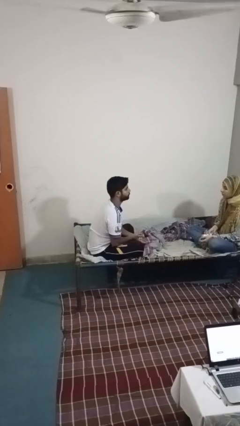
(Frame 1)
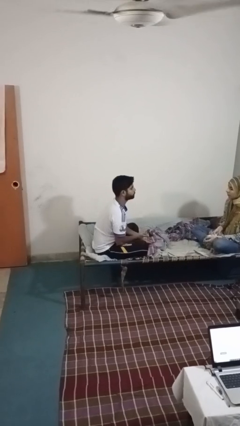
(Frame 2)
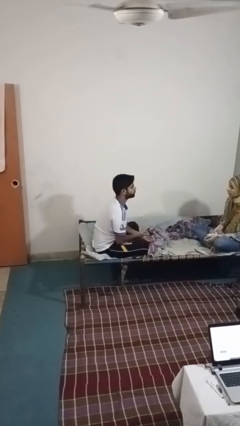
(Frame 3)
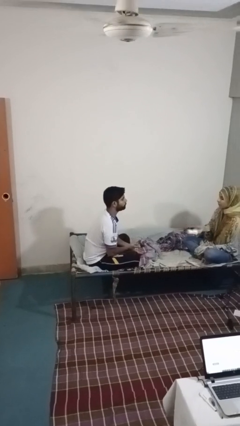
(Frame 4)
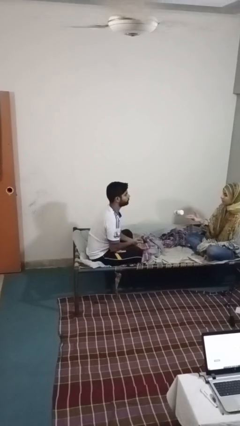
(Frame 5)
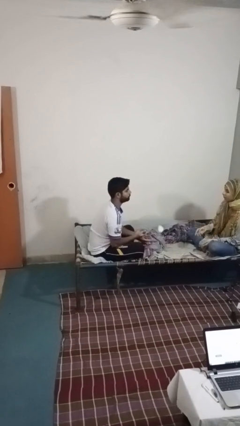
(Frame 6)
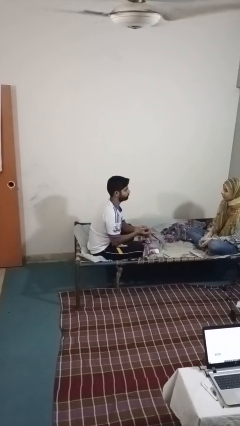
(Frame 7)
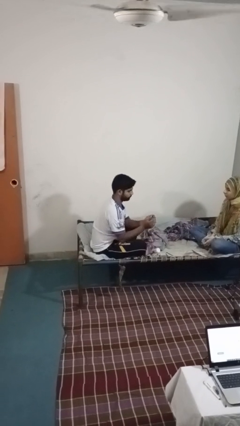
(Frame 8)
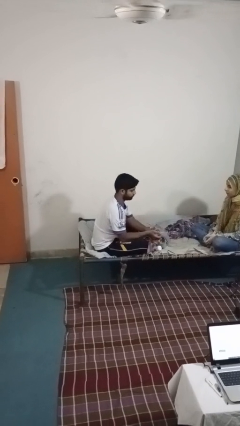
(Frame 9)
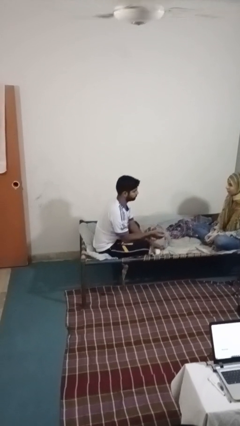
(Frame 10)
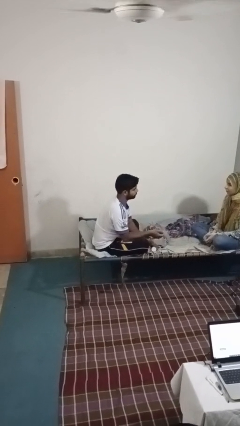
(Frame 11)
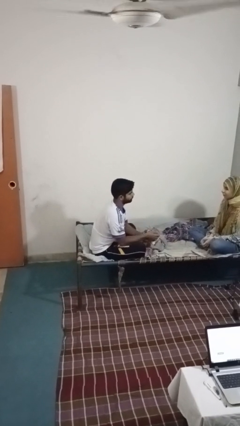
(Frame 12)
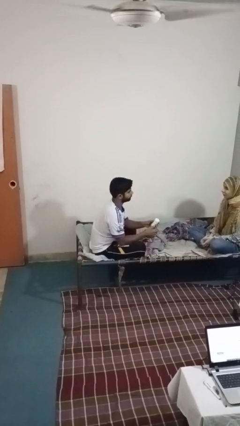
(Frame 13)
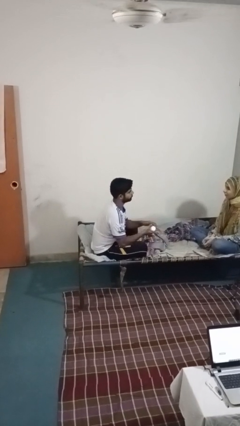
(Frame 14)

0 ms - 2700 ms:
person catches object from person

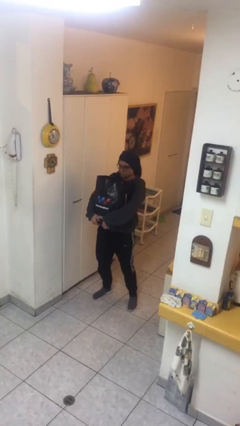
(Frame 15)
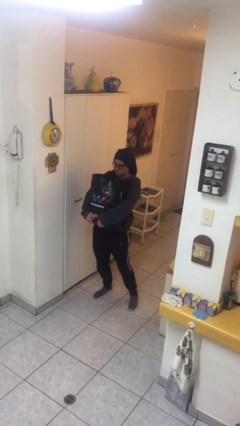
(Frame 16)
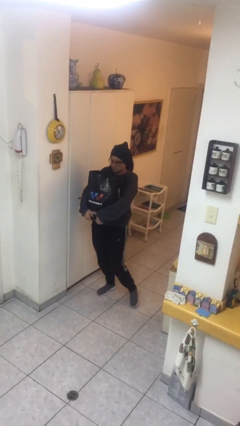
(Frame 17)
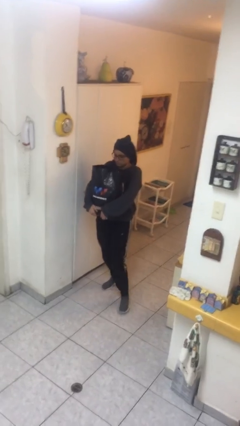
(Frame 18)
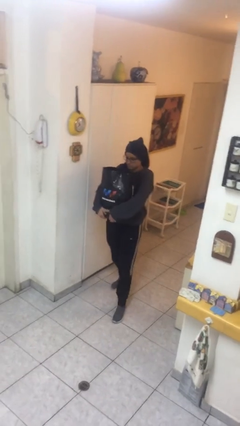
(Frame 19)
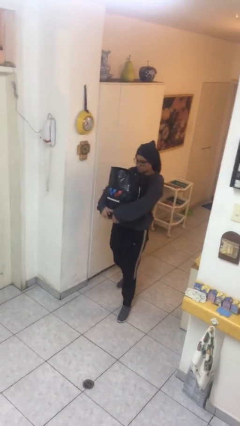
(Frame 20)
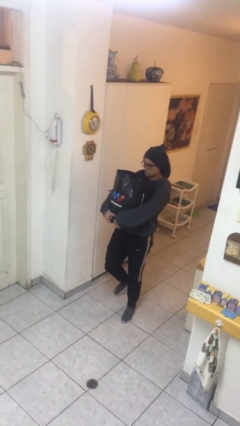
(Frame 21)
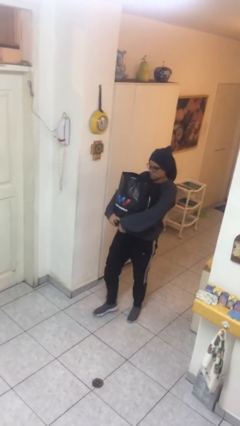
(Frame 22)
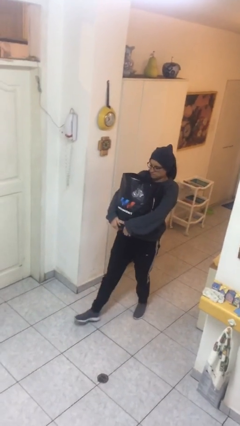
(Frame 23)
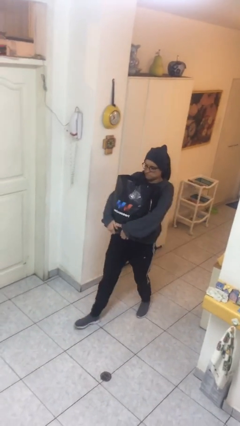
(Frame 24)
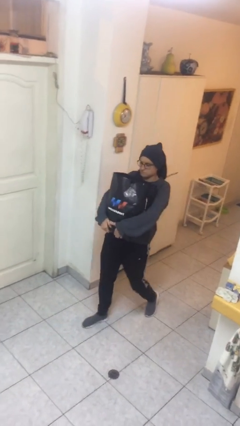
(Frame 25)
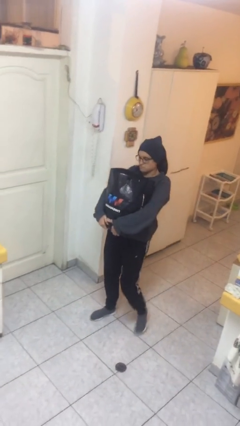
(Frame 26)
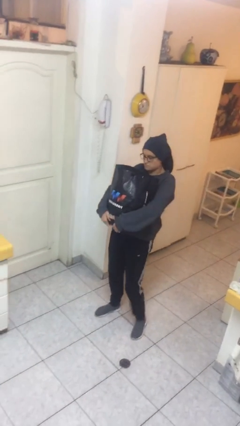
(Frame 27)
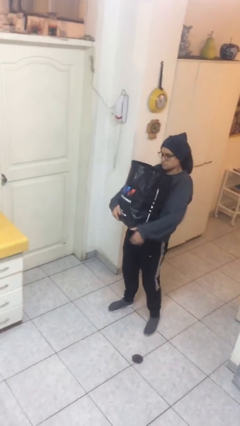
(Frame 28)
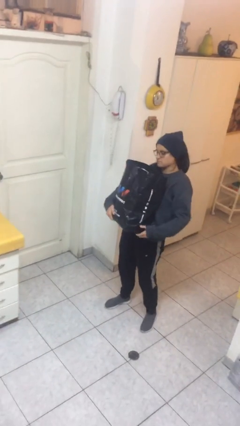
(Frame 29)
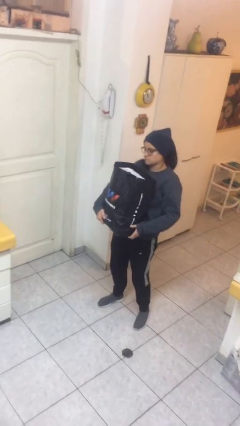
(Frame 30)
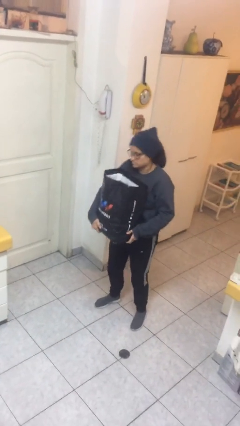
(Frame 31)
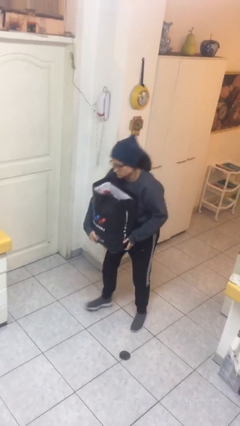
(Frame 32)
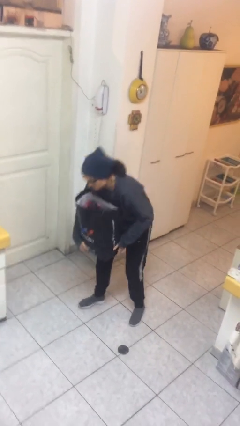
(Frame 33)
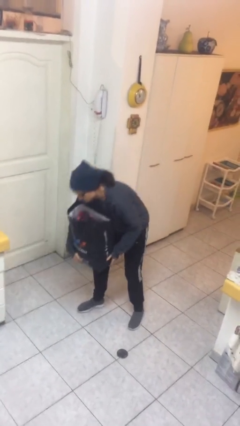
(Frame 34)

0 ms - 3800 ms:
person carries heavy object

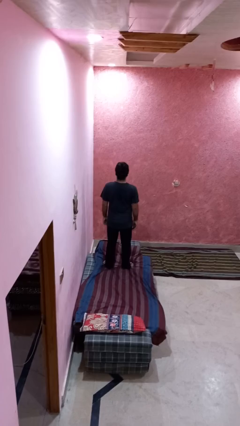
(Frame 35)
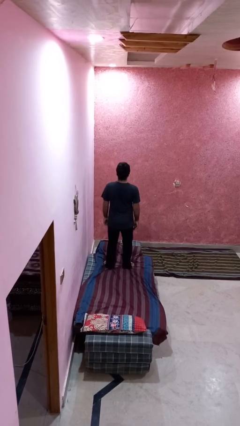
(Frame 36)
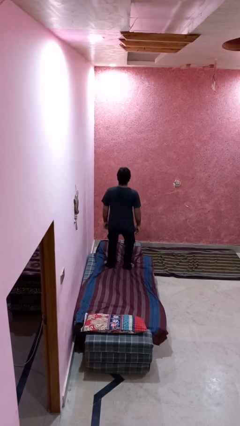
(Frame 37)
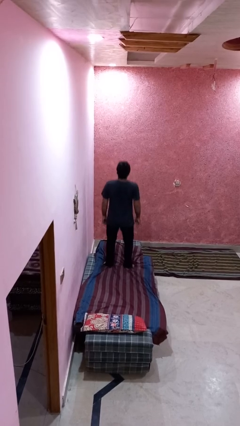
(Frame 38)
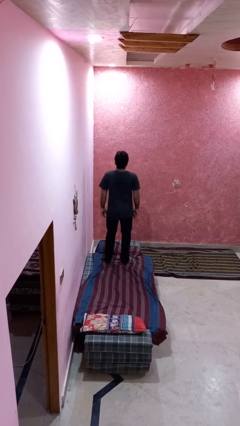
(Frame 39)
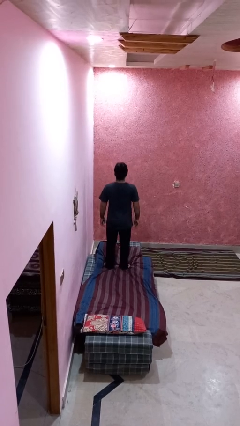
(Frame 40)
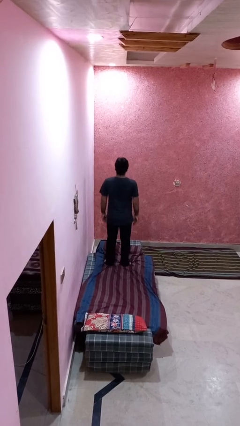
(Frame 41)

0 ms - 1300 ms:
person jumps on bed

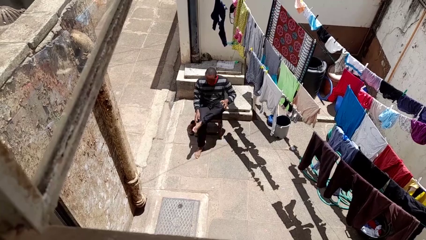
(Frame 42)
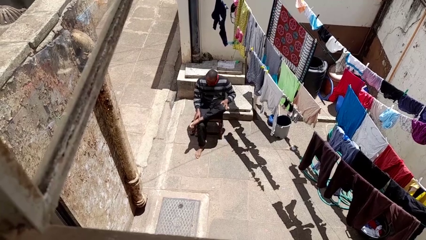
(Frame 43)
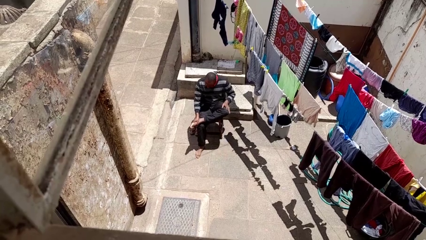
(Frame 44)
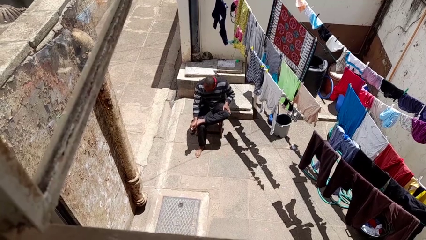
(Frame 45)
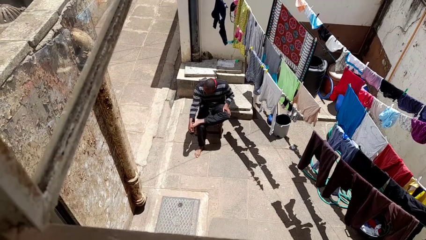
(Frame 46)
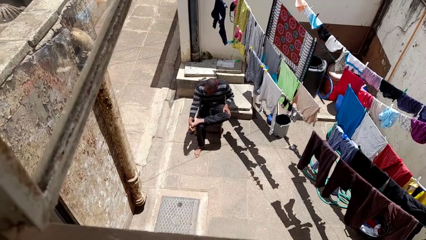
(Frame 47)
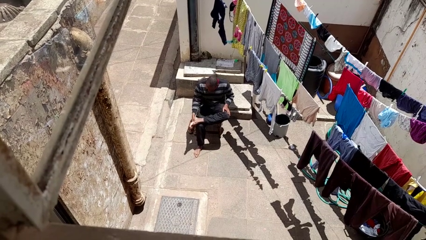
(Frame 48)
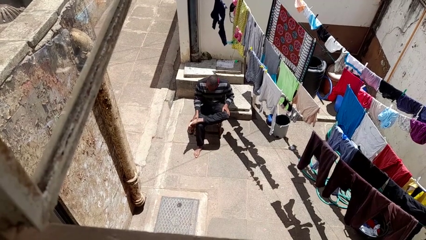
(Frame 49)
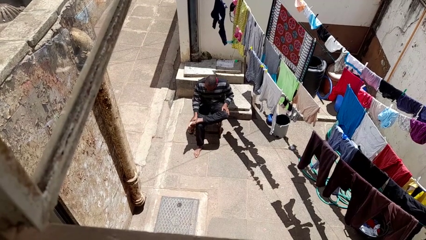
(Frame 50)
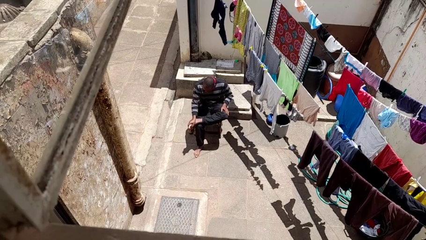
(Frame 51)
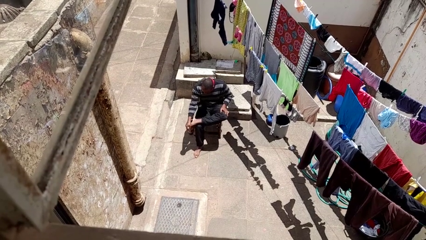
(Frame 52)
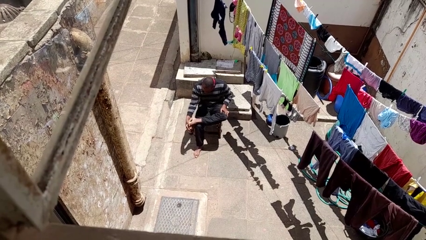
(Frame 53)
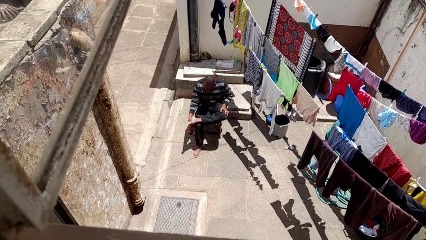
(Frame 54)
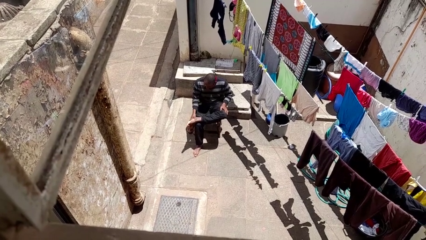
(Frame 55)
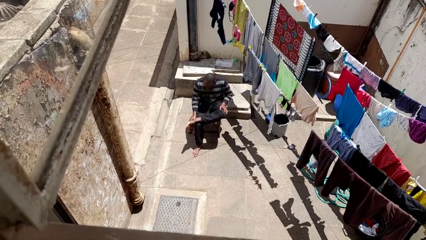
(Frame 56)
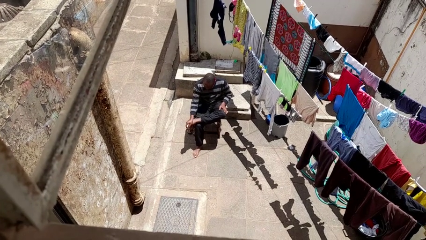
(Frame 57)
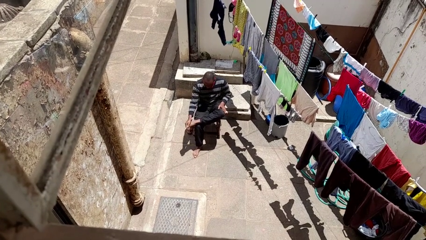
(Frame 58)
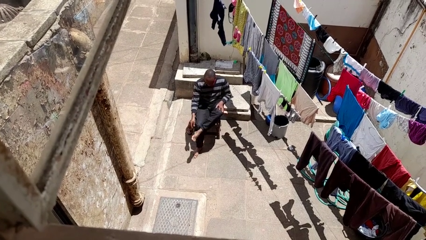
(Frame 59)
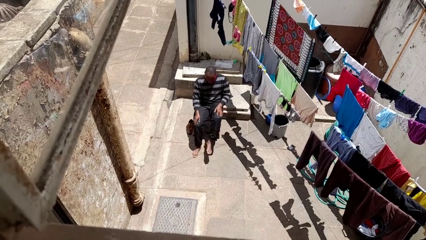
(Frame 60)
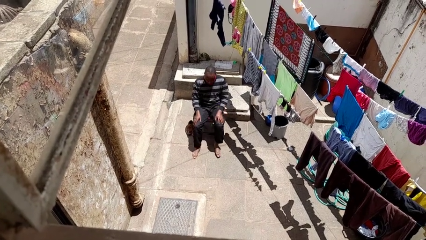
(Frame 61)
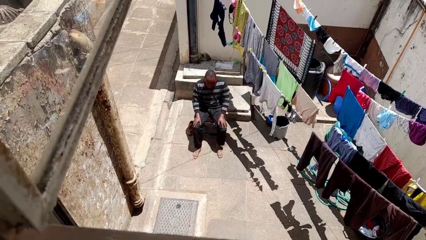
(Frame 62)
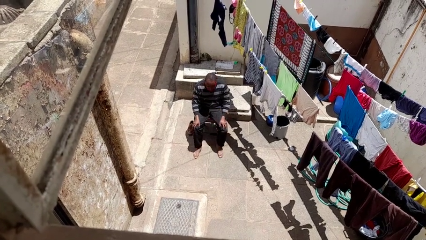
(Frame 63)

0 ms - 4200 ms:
person rubs foot

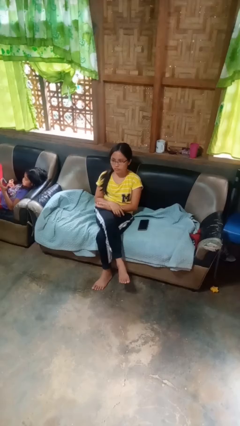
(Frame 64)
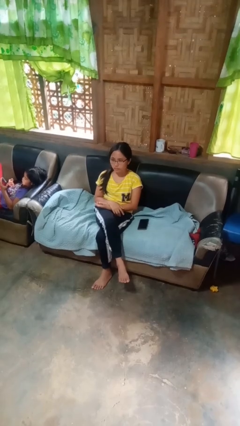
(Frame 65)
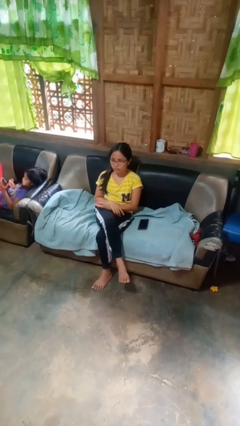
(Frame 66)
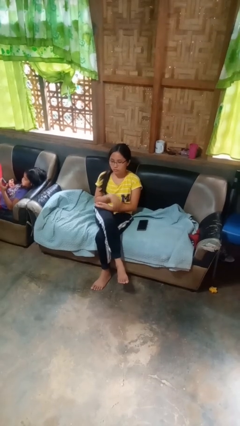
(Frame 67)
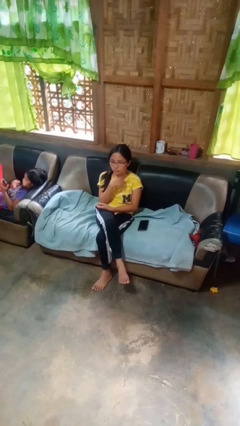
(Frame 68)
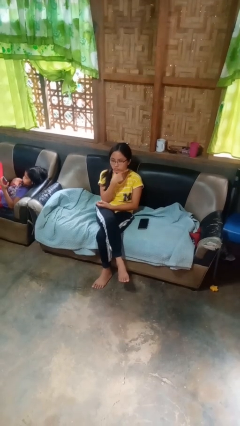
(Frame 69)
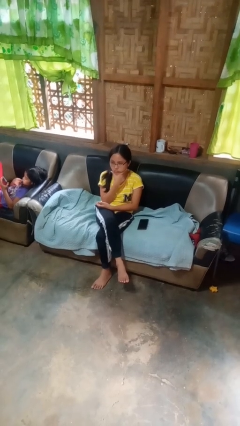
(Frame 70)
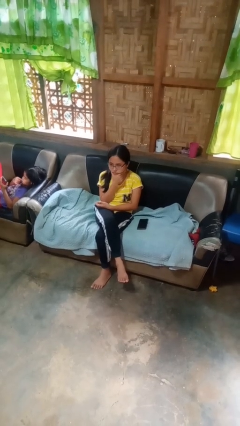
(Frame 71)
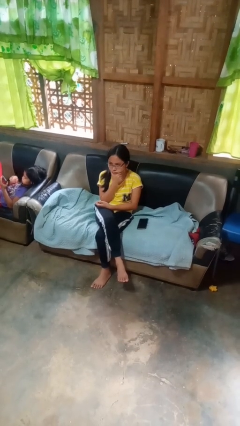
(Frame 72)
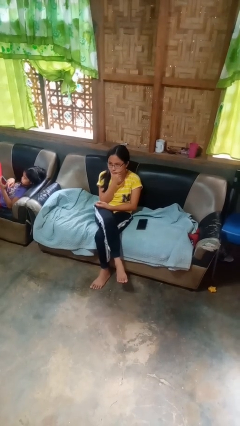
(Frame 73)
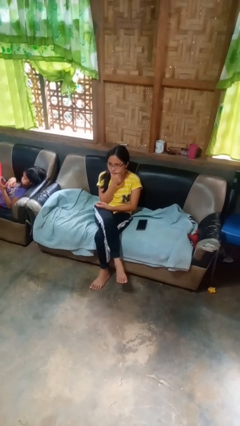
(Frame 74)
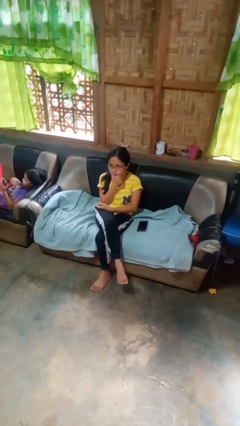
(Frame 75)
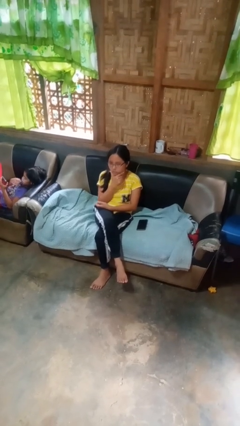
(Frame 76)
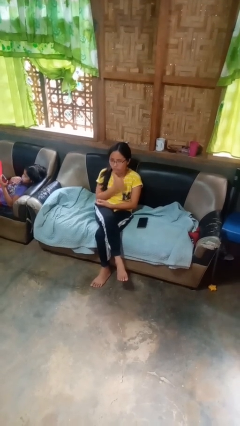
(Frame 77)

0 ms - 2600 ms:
person strokes chin

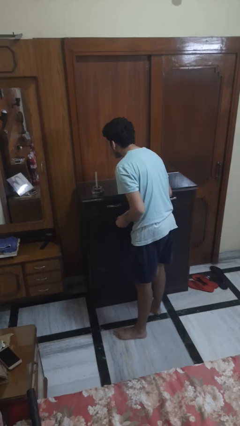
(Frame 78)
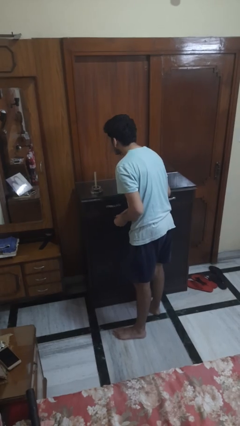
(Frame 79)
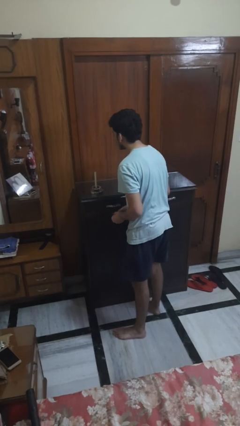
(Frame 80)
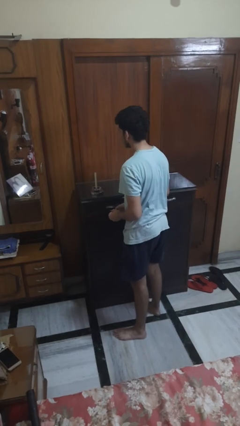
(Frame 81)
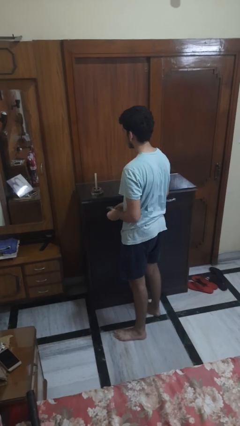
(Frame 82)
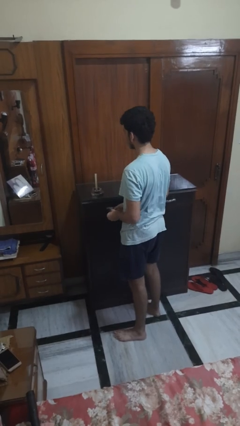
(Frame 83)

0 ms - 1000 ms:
person extinguishes candle

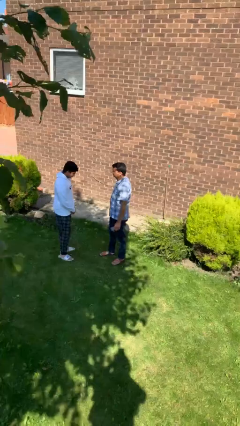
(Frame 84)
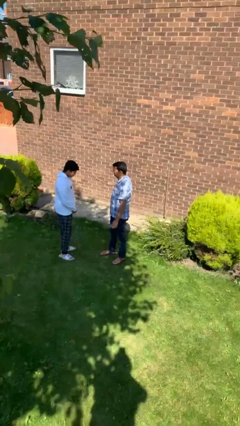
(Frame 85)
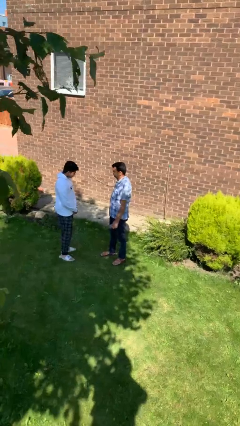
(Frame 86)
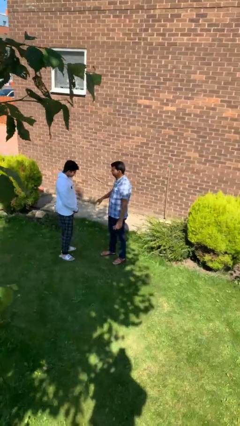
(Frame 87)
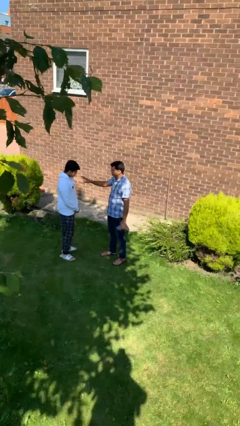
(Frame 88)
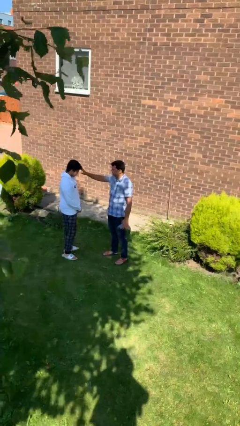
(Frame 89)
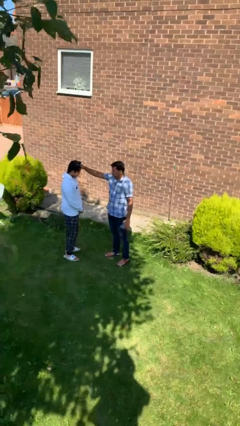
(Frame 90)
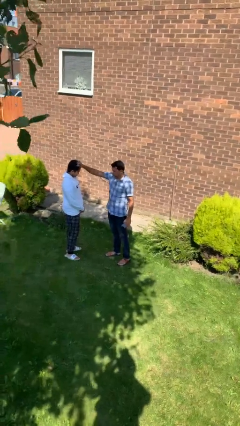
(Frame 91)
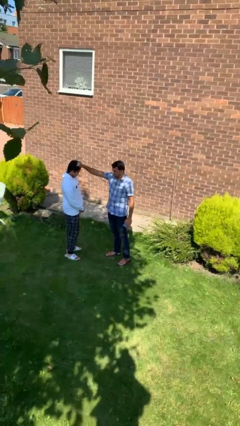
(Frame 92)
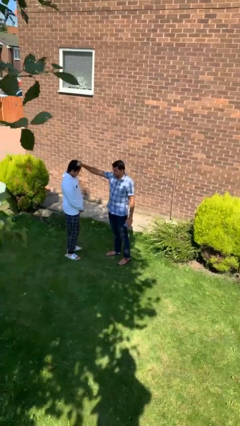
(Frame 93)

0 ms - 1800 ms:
person grabs person by hair
